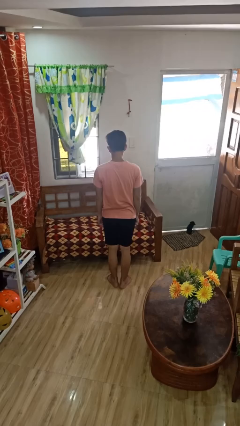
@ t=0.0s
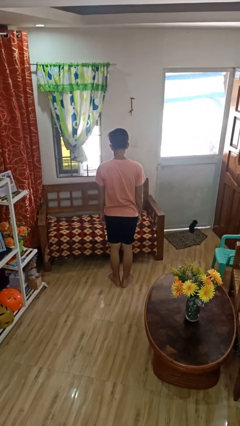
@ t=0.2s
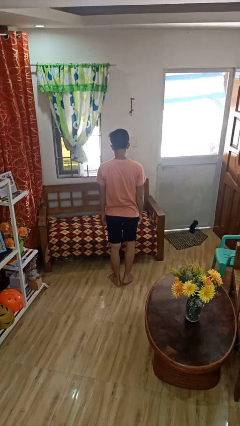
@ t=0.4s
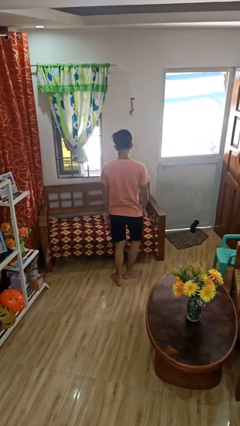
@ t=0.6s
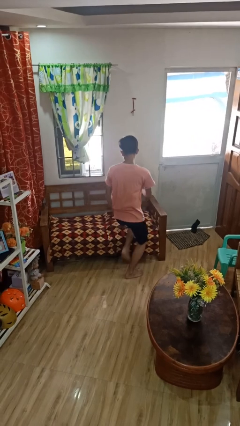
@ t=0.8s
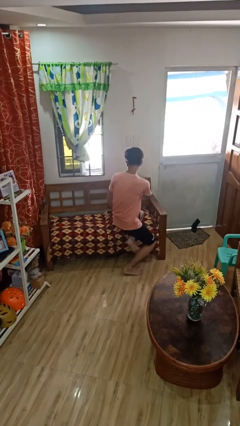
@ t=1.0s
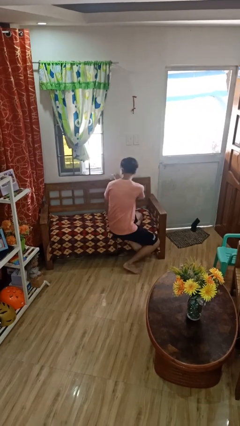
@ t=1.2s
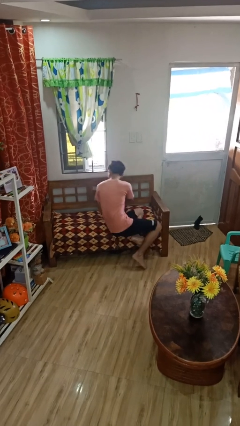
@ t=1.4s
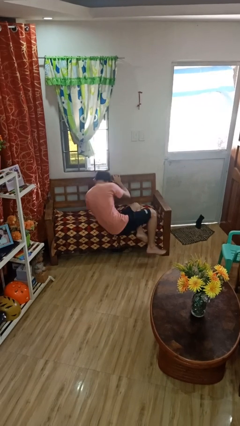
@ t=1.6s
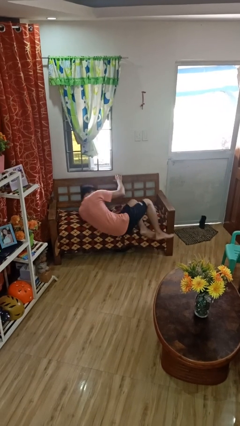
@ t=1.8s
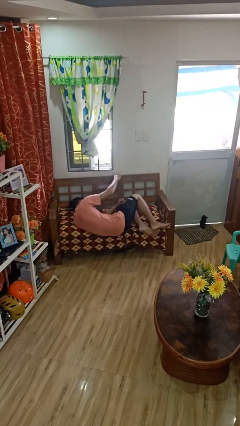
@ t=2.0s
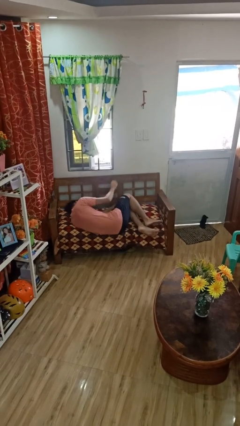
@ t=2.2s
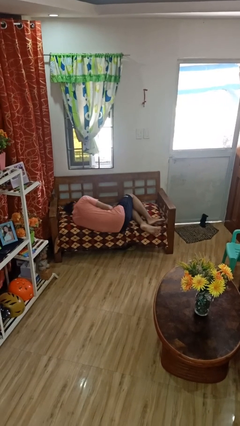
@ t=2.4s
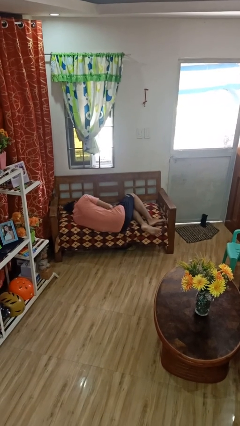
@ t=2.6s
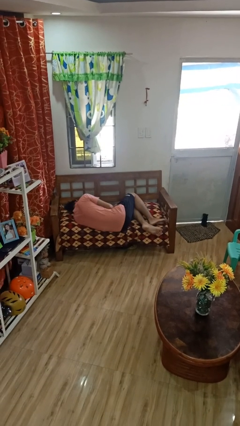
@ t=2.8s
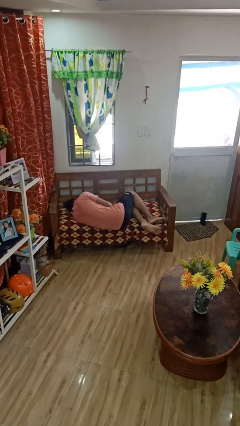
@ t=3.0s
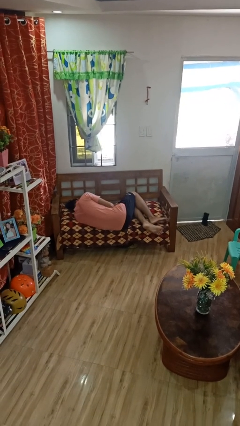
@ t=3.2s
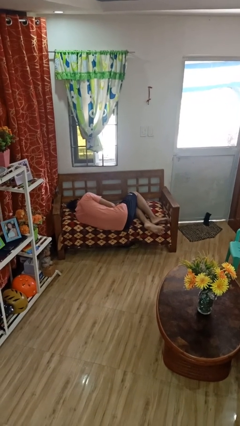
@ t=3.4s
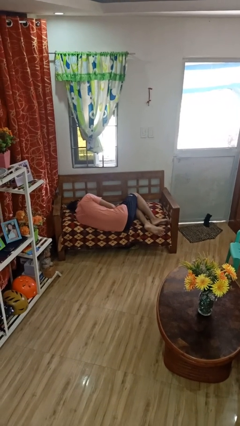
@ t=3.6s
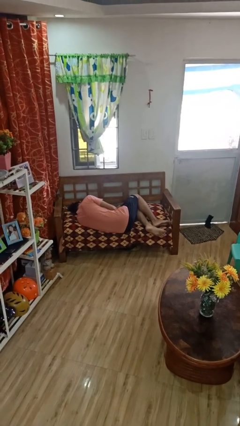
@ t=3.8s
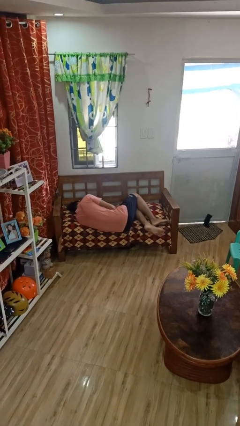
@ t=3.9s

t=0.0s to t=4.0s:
person lies down on couch

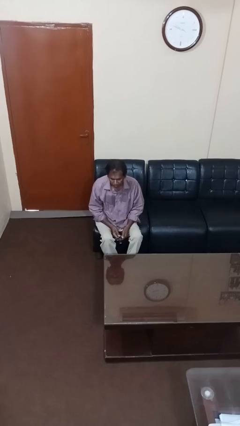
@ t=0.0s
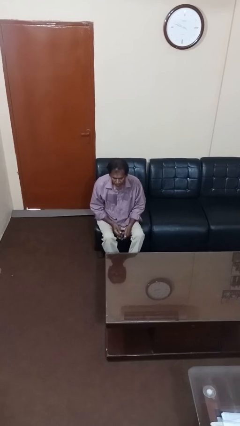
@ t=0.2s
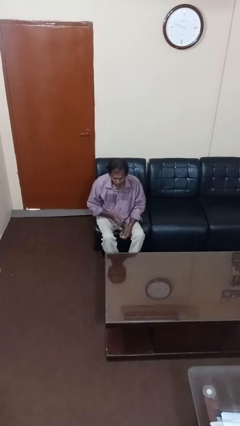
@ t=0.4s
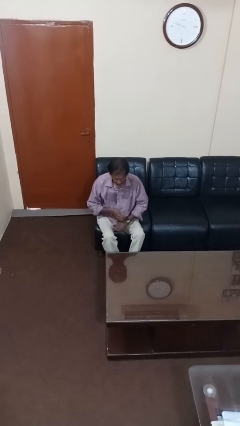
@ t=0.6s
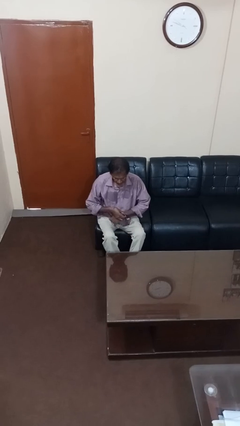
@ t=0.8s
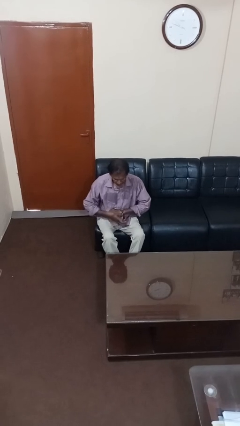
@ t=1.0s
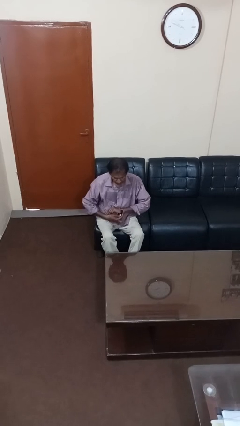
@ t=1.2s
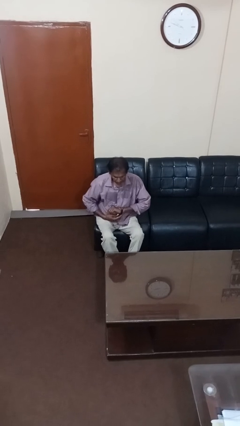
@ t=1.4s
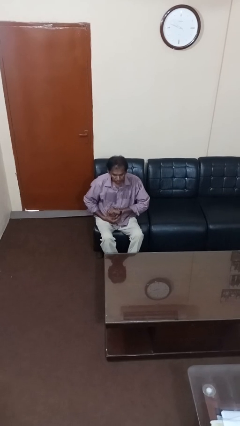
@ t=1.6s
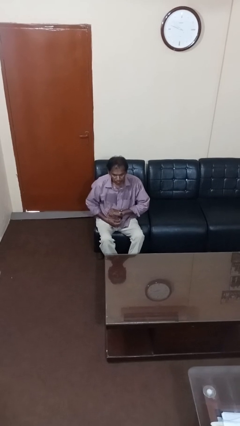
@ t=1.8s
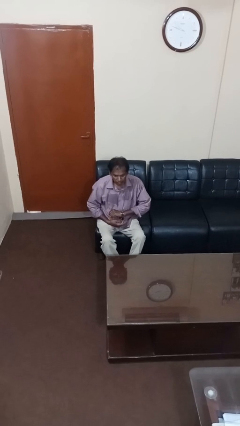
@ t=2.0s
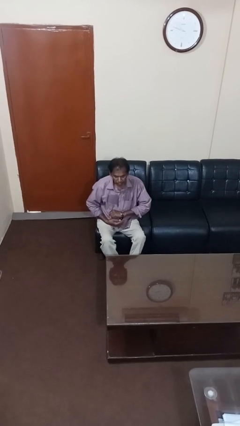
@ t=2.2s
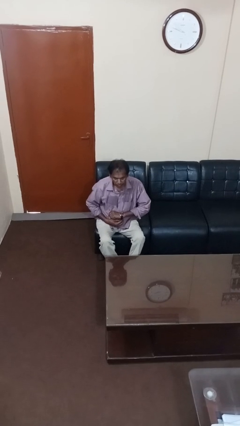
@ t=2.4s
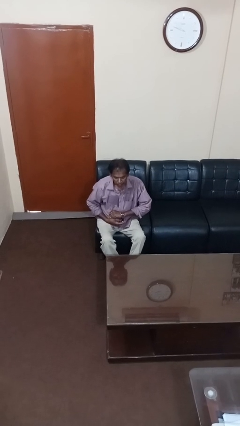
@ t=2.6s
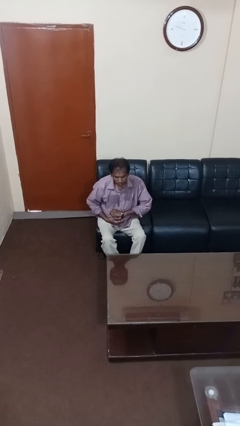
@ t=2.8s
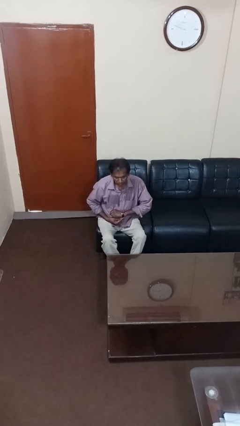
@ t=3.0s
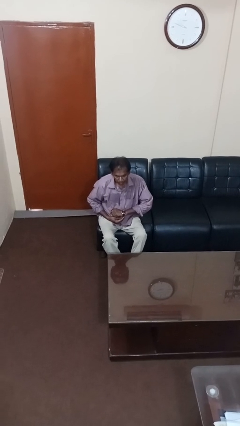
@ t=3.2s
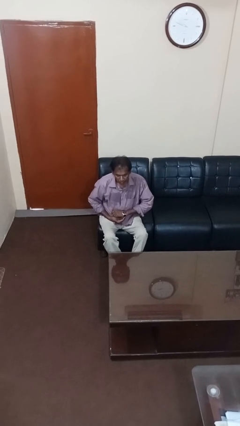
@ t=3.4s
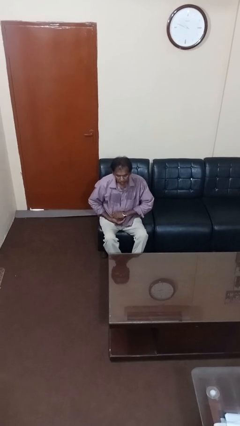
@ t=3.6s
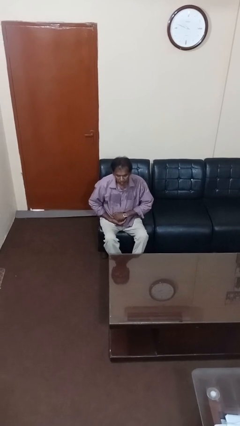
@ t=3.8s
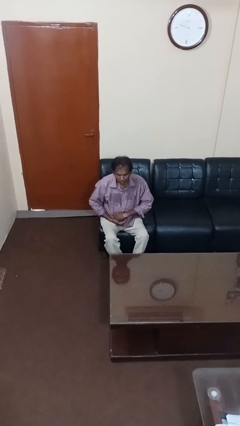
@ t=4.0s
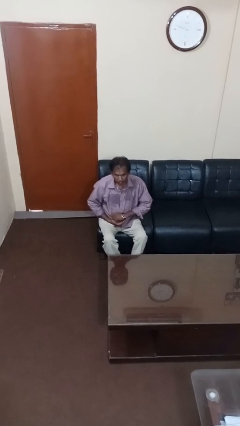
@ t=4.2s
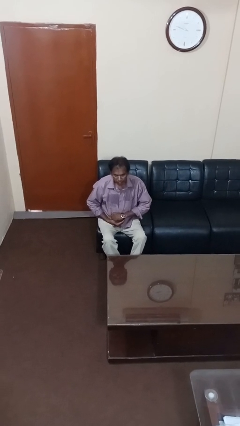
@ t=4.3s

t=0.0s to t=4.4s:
person puts on wristwatch

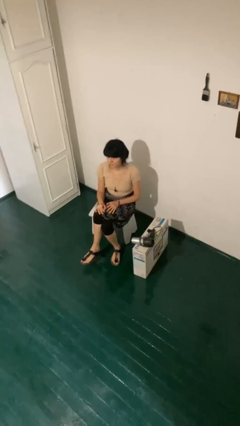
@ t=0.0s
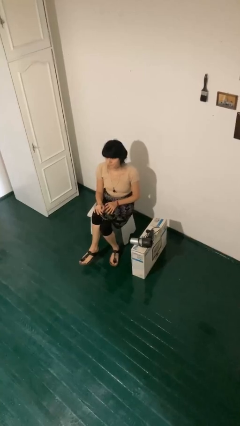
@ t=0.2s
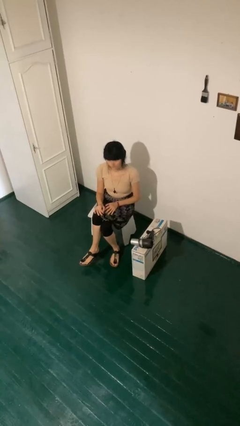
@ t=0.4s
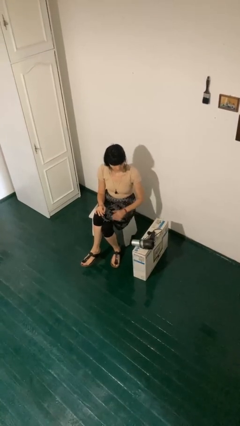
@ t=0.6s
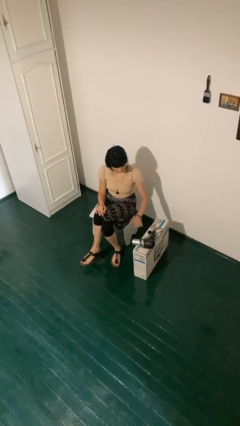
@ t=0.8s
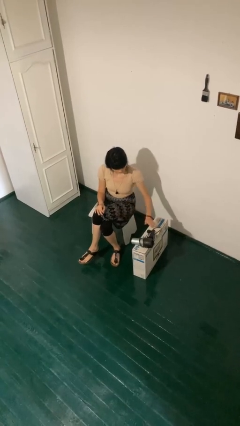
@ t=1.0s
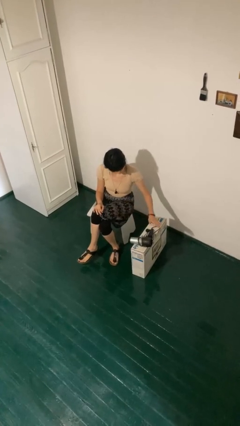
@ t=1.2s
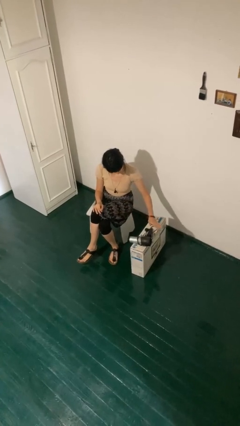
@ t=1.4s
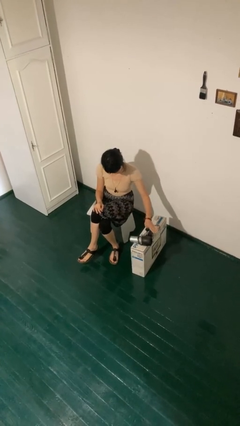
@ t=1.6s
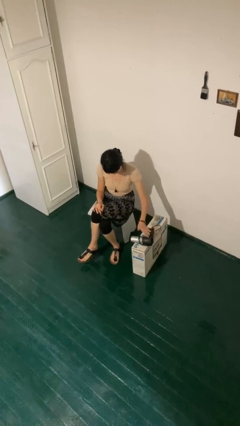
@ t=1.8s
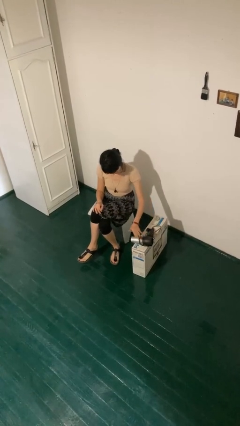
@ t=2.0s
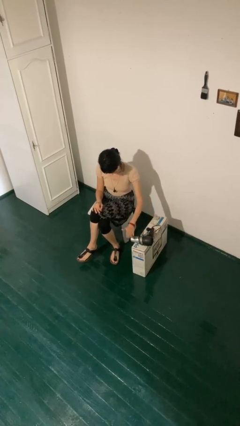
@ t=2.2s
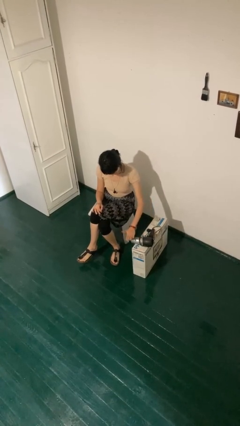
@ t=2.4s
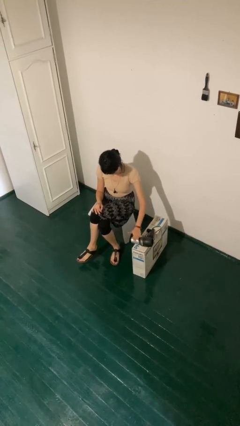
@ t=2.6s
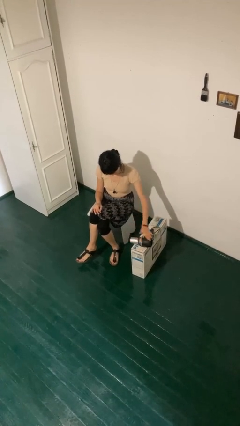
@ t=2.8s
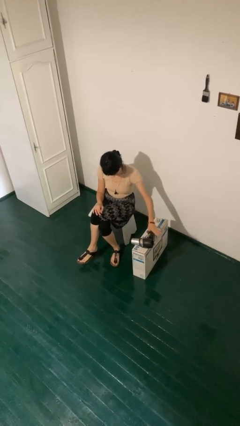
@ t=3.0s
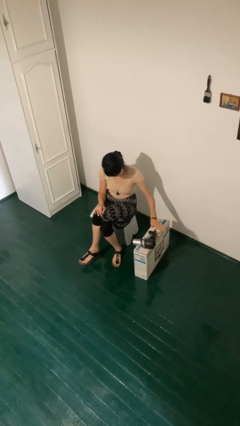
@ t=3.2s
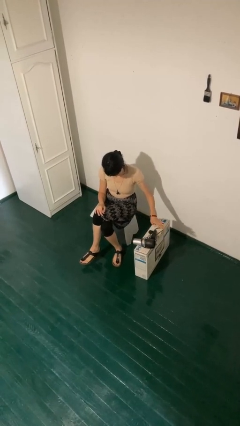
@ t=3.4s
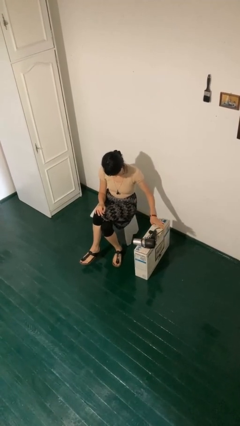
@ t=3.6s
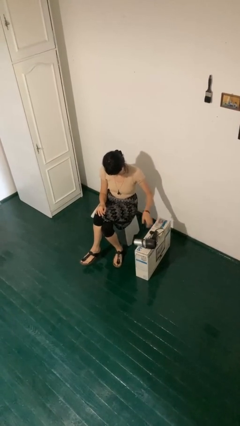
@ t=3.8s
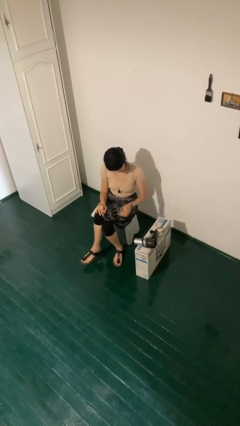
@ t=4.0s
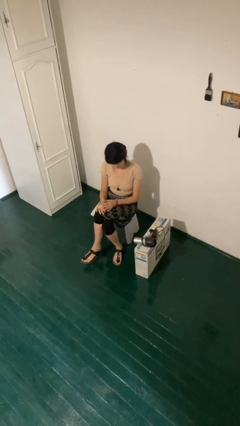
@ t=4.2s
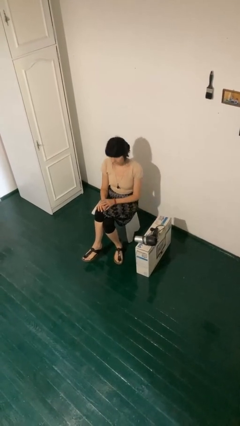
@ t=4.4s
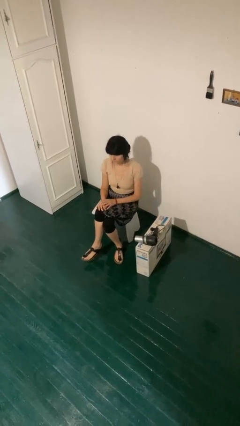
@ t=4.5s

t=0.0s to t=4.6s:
person waves hand over object

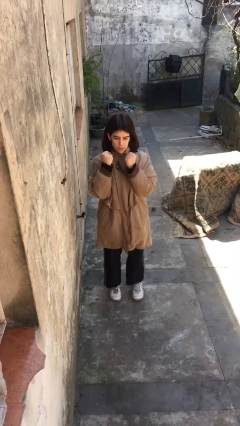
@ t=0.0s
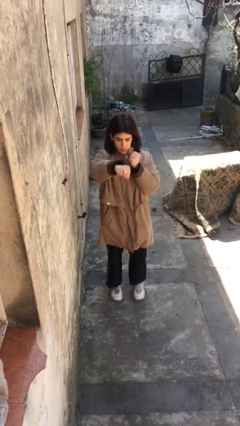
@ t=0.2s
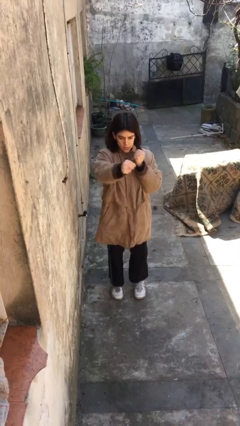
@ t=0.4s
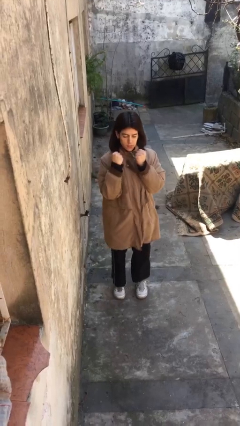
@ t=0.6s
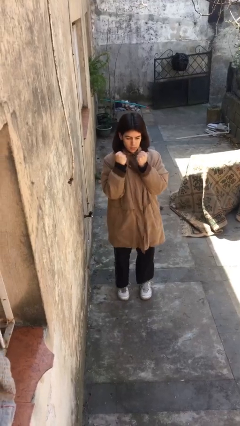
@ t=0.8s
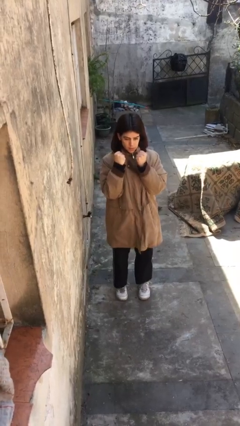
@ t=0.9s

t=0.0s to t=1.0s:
person punches

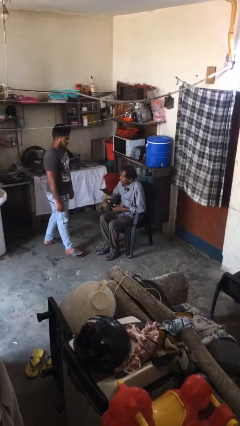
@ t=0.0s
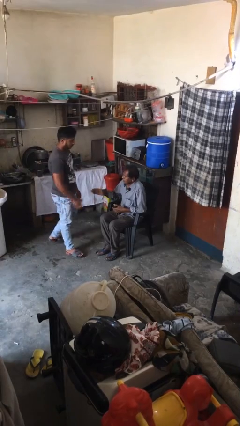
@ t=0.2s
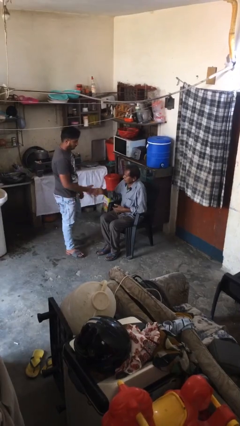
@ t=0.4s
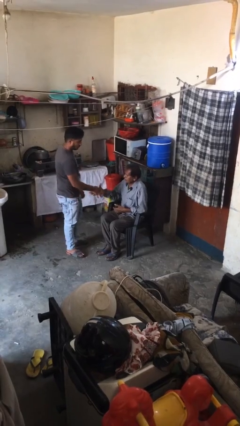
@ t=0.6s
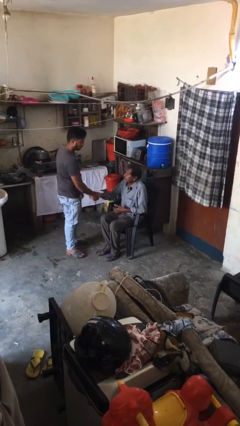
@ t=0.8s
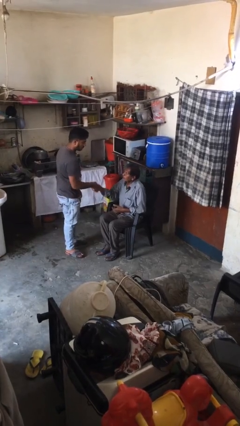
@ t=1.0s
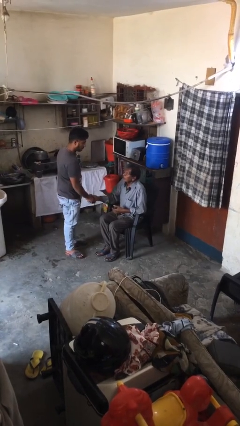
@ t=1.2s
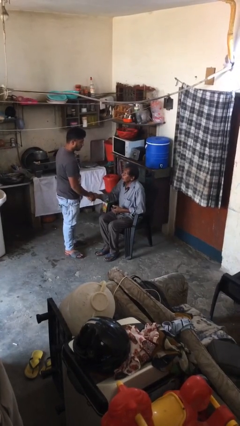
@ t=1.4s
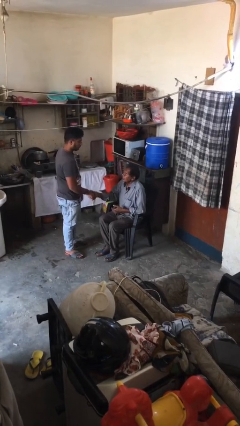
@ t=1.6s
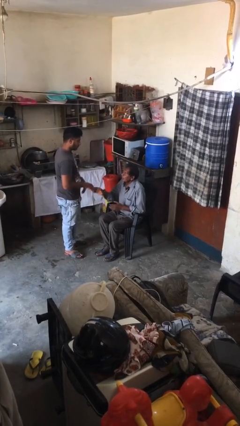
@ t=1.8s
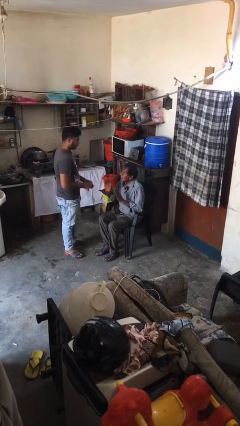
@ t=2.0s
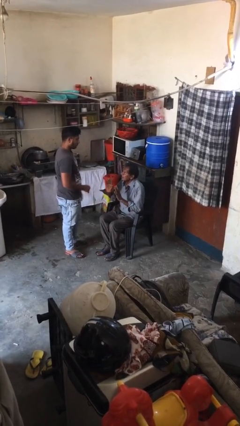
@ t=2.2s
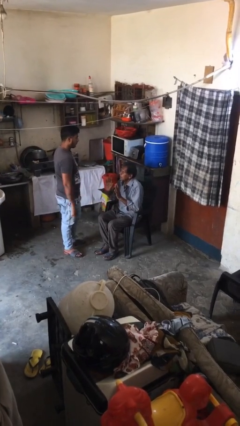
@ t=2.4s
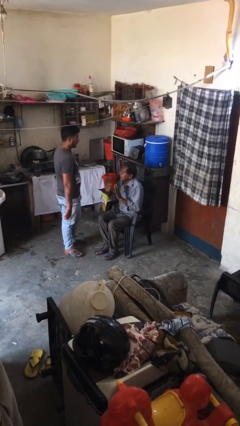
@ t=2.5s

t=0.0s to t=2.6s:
person shakes hand

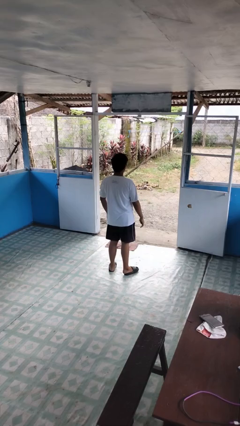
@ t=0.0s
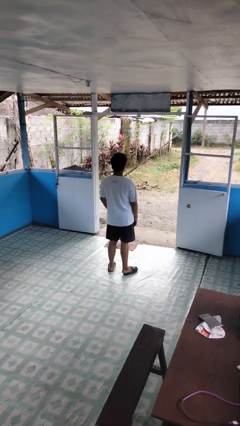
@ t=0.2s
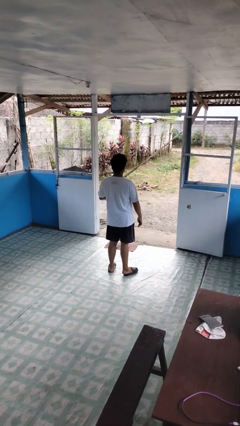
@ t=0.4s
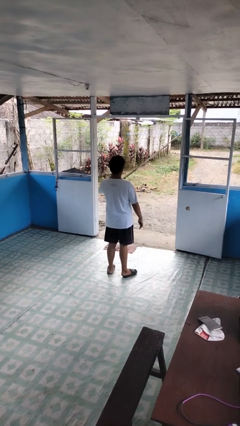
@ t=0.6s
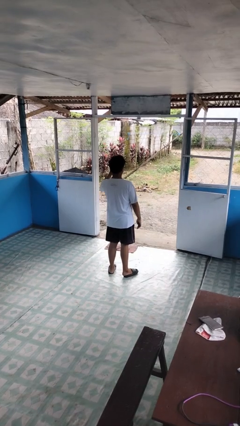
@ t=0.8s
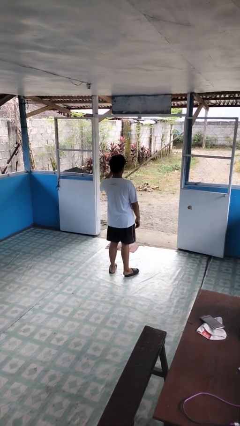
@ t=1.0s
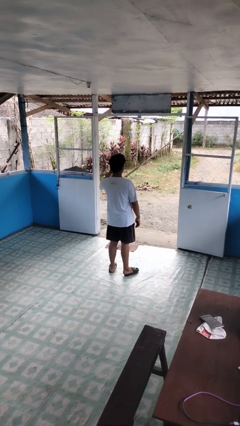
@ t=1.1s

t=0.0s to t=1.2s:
person gestures number four
